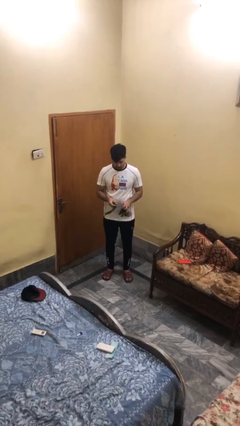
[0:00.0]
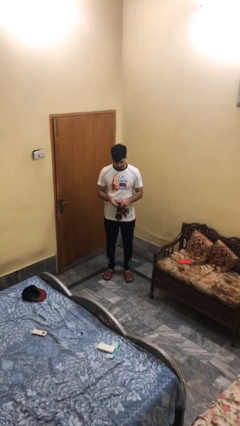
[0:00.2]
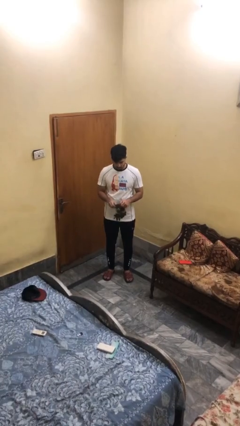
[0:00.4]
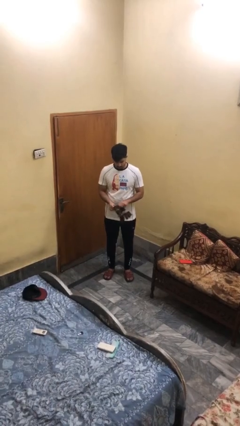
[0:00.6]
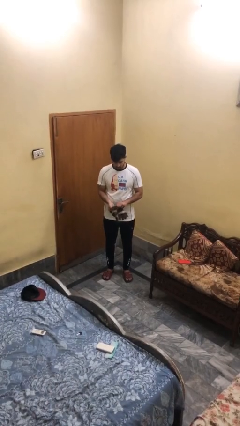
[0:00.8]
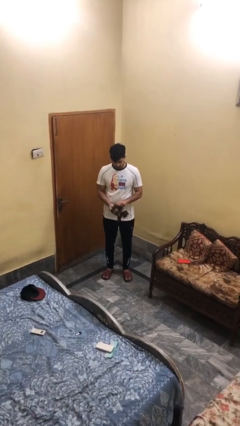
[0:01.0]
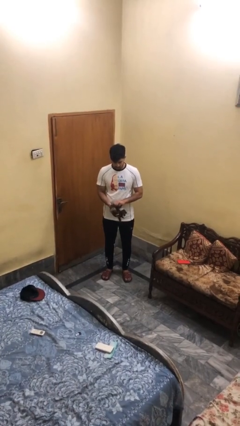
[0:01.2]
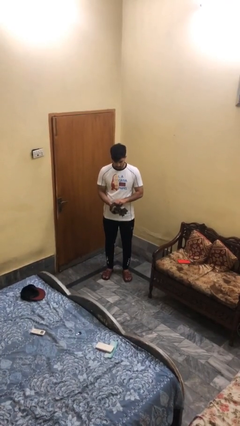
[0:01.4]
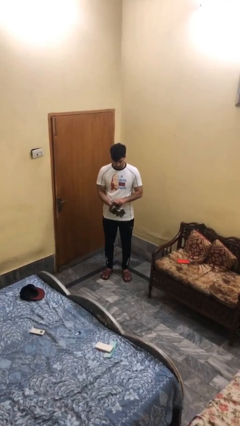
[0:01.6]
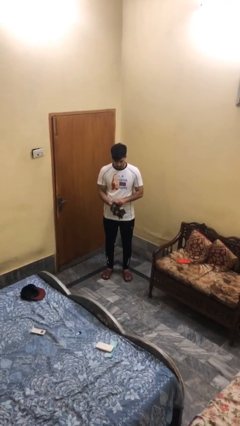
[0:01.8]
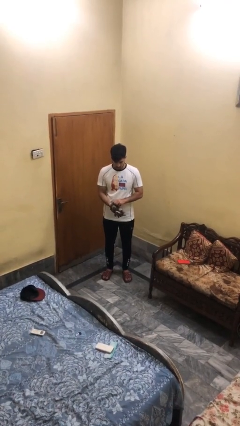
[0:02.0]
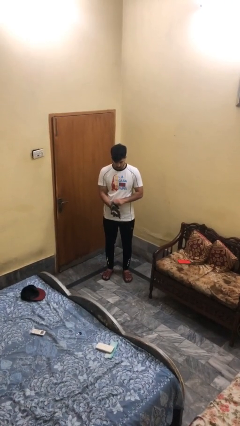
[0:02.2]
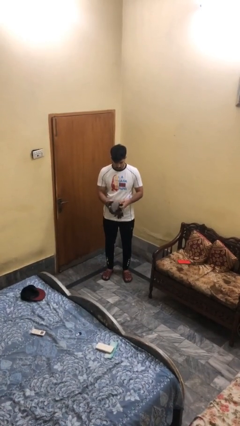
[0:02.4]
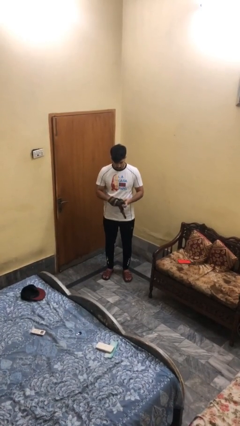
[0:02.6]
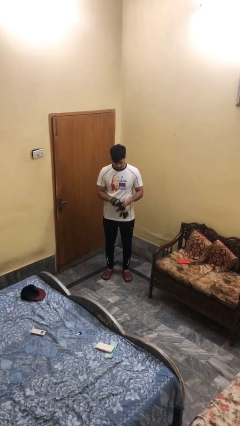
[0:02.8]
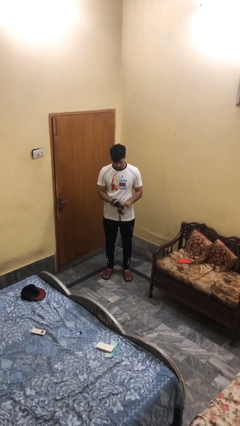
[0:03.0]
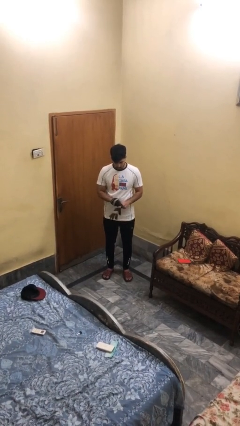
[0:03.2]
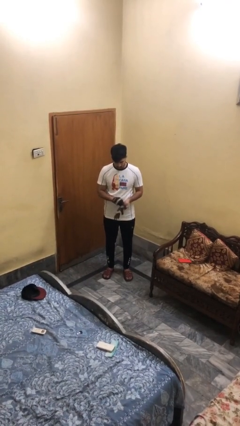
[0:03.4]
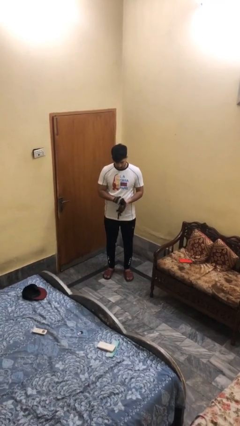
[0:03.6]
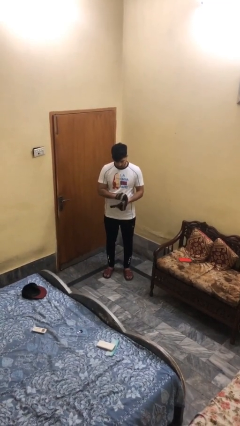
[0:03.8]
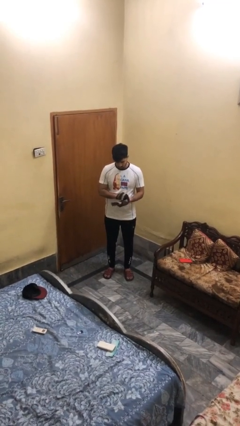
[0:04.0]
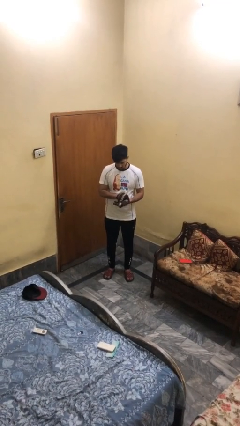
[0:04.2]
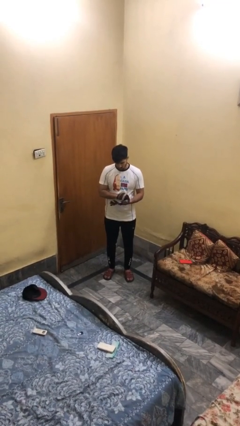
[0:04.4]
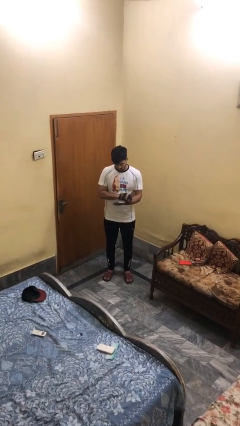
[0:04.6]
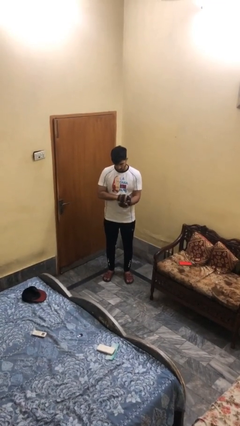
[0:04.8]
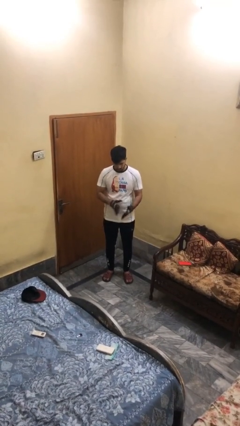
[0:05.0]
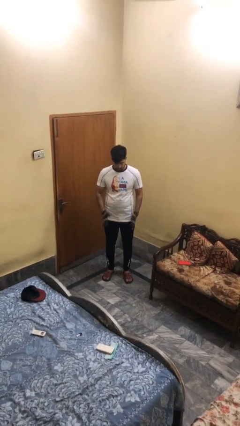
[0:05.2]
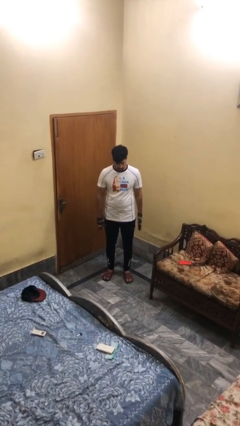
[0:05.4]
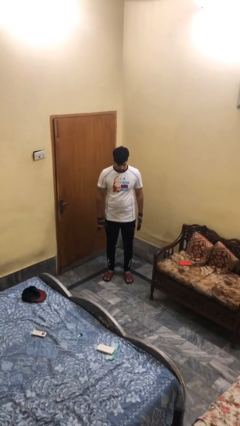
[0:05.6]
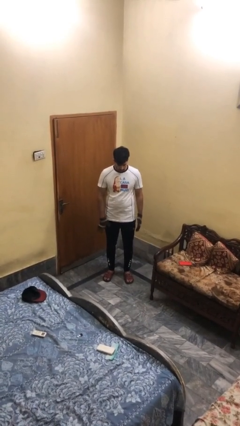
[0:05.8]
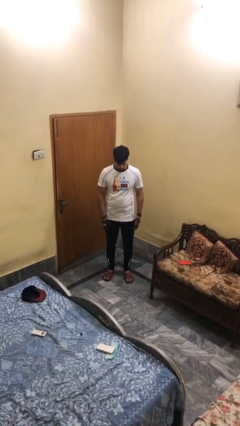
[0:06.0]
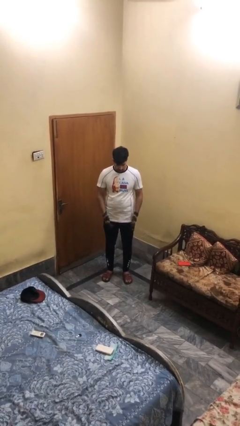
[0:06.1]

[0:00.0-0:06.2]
person puts on gloves

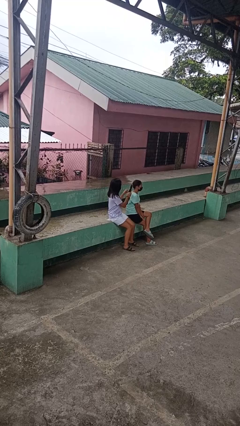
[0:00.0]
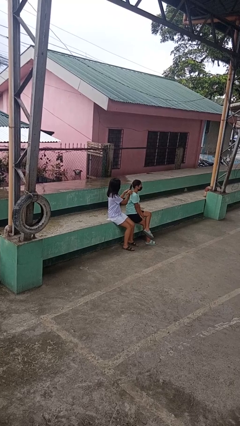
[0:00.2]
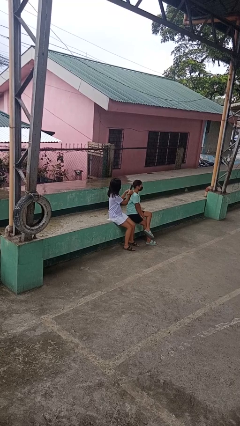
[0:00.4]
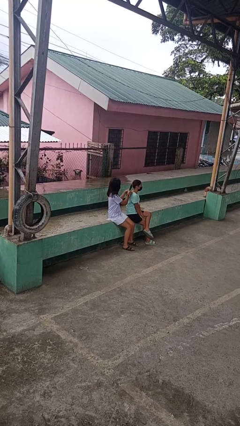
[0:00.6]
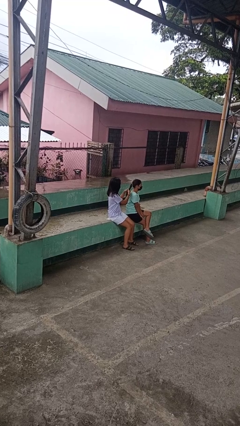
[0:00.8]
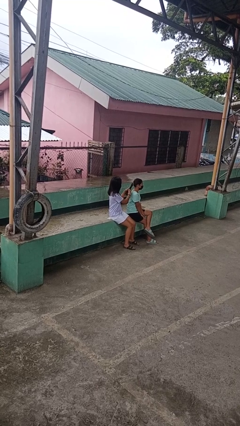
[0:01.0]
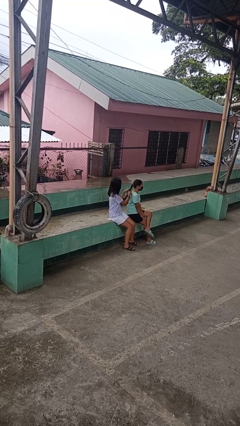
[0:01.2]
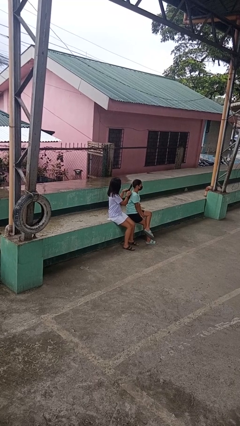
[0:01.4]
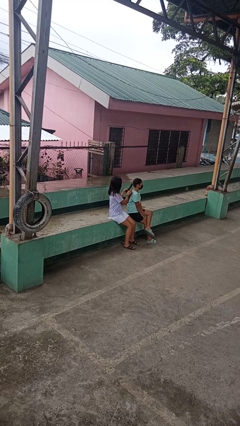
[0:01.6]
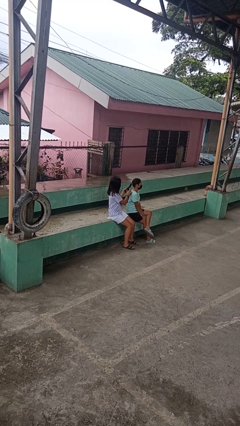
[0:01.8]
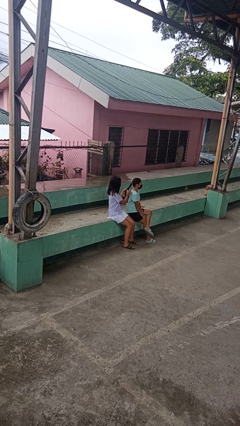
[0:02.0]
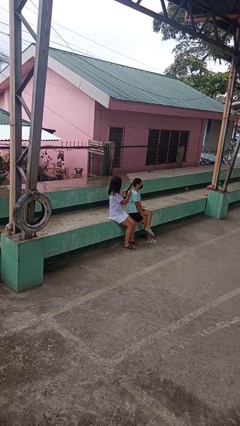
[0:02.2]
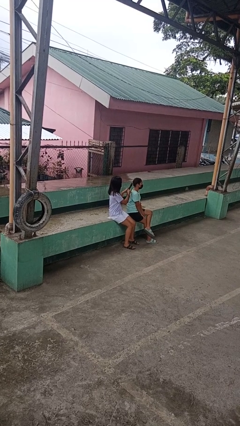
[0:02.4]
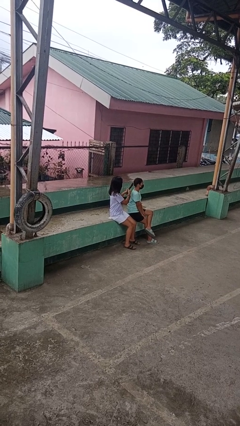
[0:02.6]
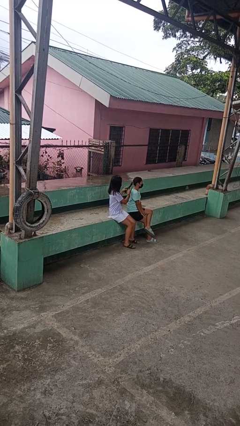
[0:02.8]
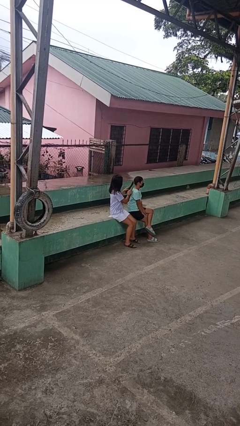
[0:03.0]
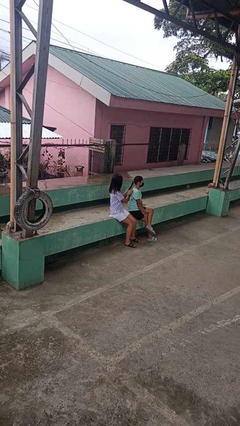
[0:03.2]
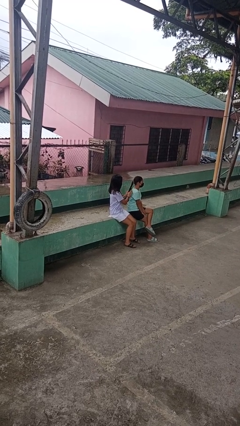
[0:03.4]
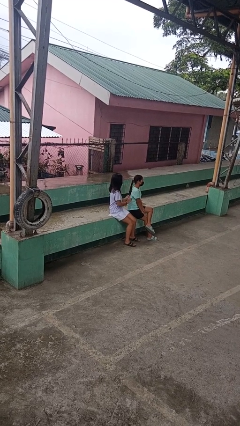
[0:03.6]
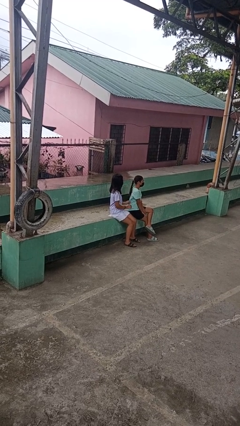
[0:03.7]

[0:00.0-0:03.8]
person braids hair of person

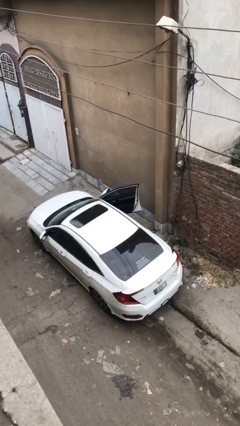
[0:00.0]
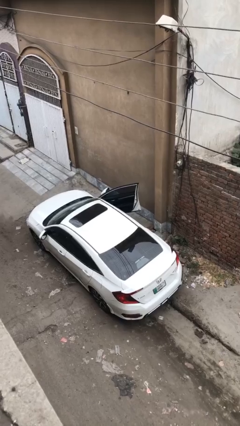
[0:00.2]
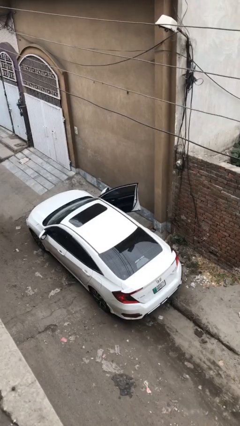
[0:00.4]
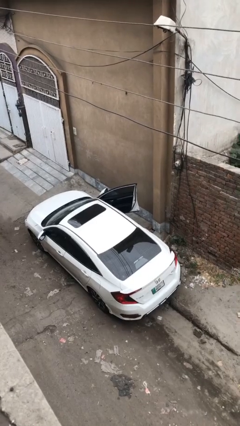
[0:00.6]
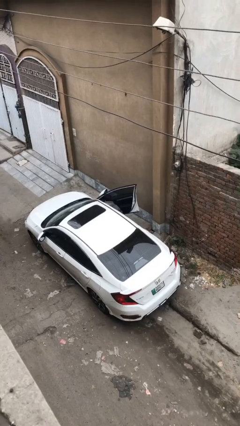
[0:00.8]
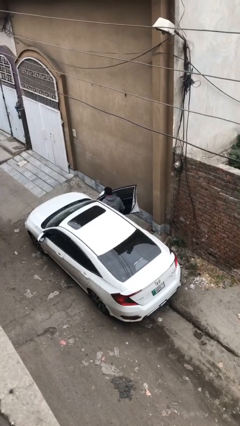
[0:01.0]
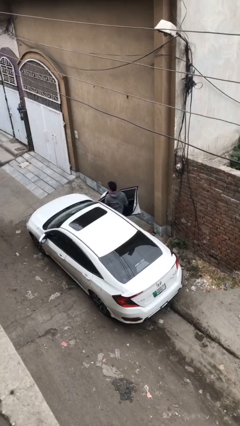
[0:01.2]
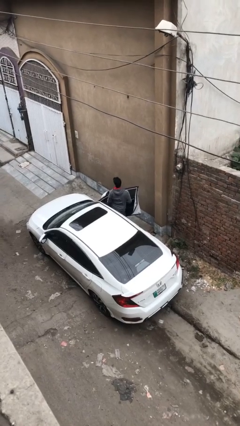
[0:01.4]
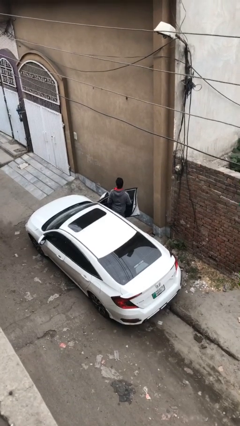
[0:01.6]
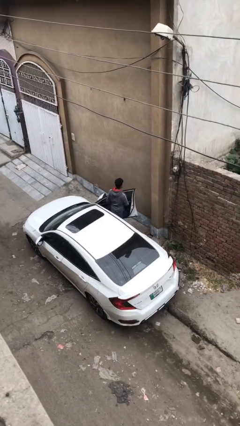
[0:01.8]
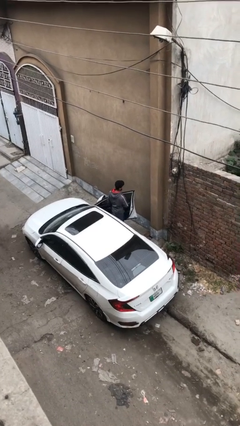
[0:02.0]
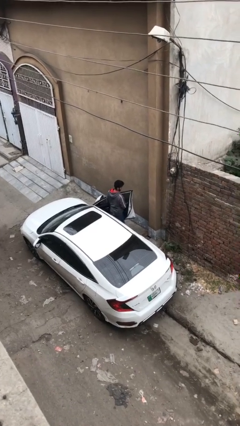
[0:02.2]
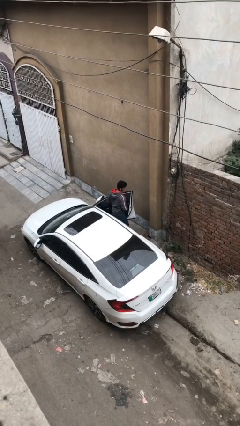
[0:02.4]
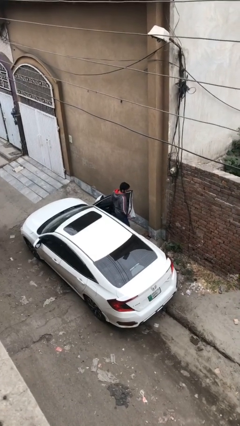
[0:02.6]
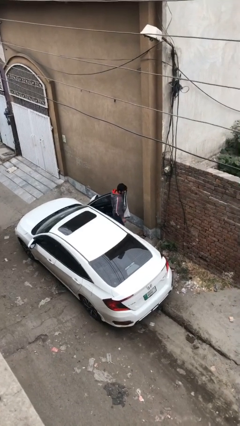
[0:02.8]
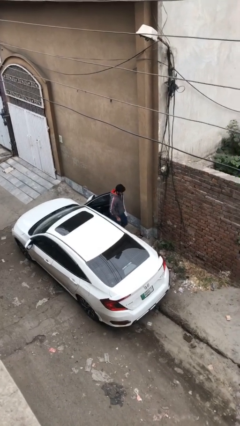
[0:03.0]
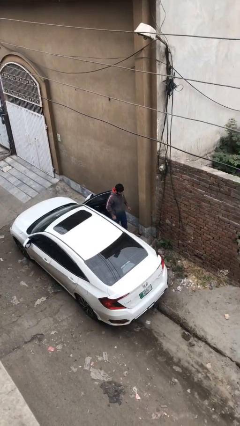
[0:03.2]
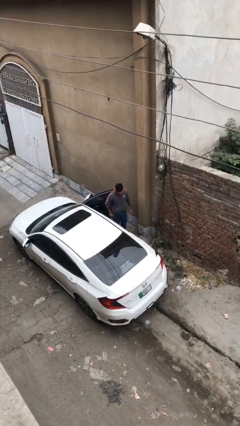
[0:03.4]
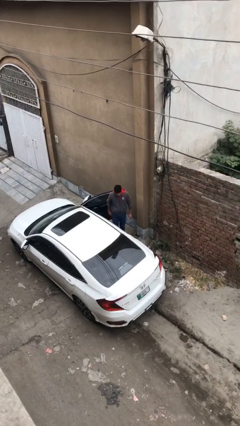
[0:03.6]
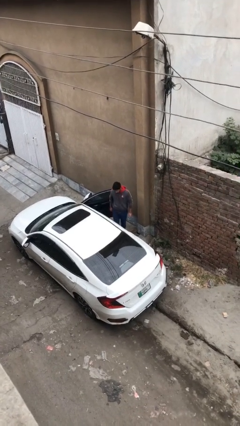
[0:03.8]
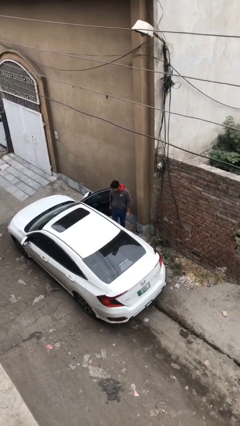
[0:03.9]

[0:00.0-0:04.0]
person exits car

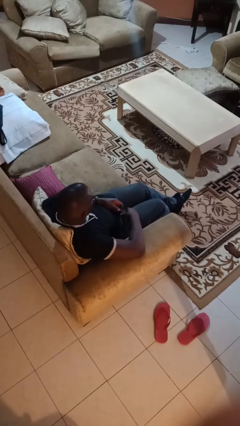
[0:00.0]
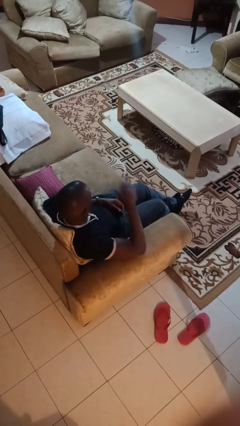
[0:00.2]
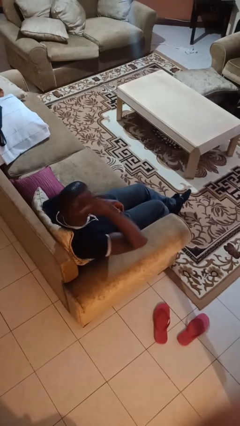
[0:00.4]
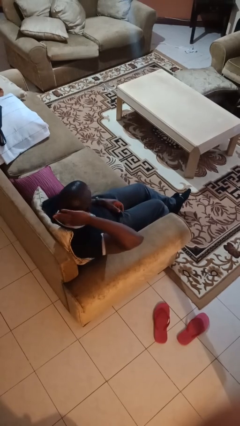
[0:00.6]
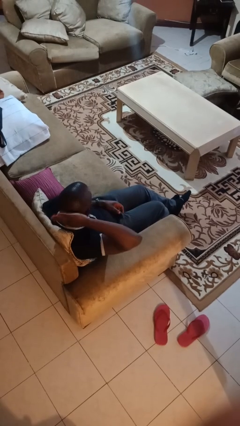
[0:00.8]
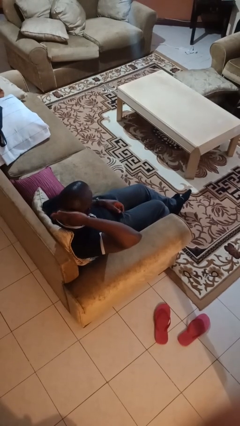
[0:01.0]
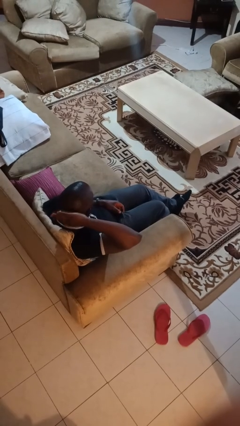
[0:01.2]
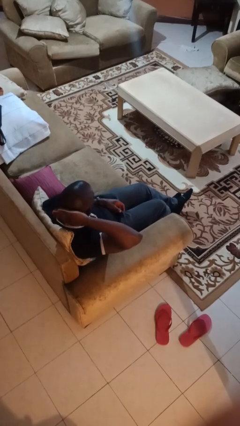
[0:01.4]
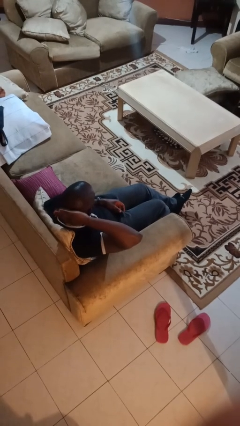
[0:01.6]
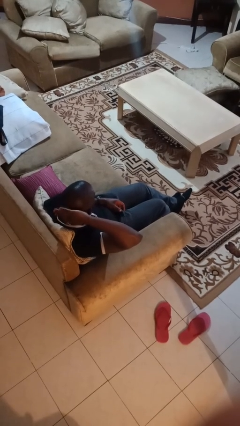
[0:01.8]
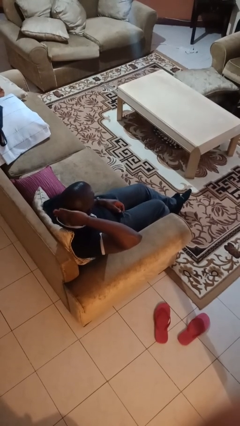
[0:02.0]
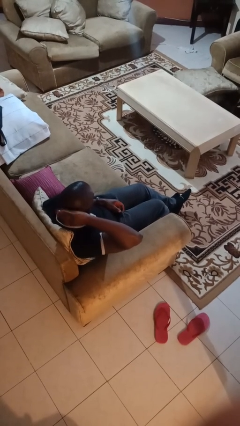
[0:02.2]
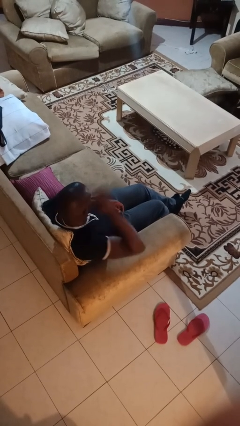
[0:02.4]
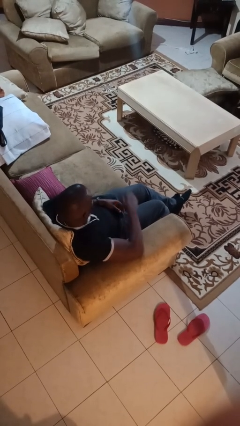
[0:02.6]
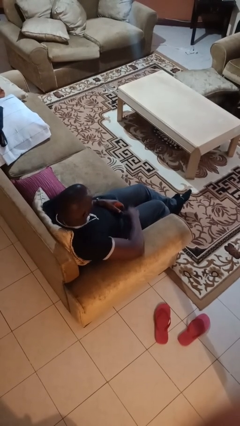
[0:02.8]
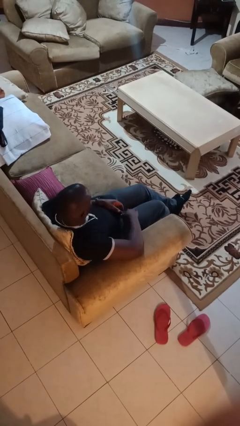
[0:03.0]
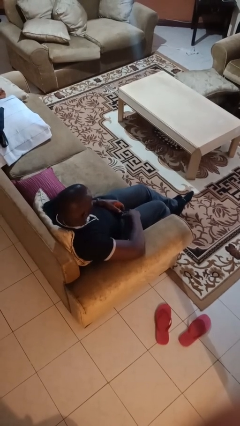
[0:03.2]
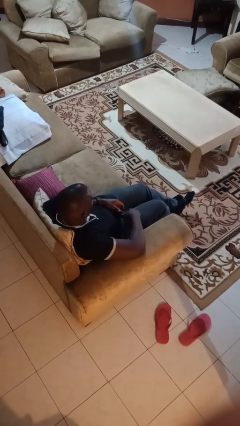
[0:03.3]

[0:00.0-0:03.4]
person pats head
